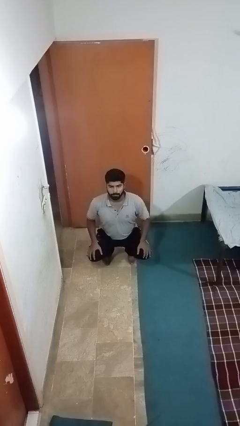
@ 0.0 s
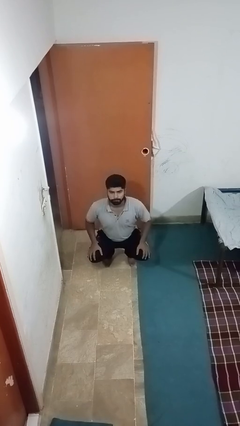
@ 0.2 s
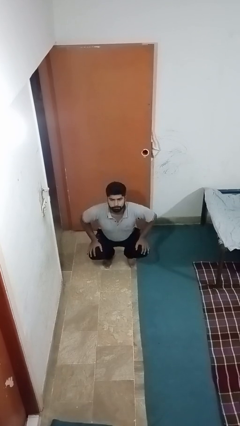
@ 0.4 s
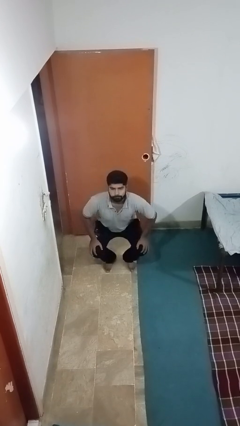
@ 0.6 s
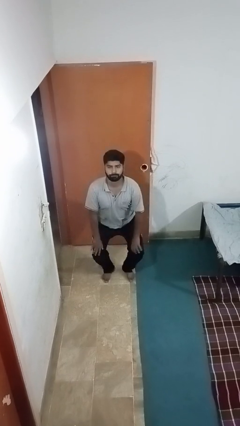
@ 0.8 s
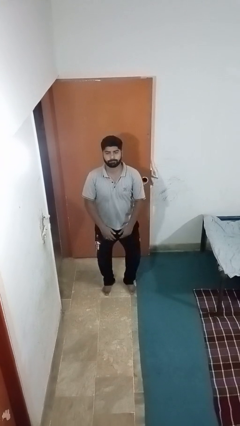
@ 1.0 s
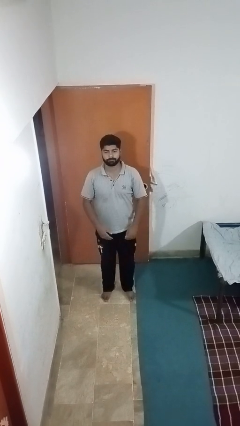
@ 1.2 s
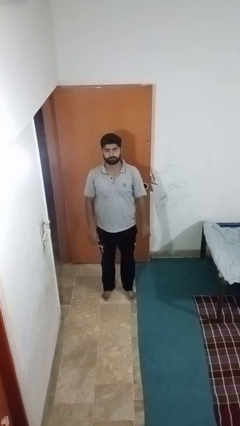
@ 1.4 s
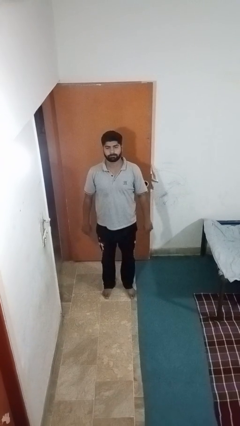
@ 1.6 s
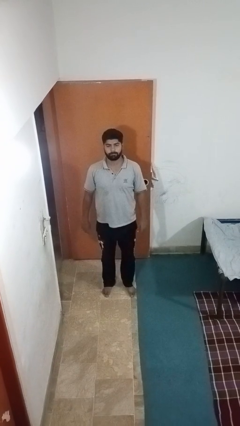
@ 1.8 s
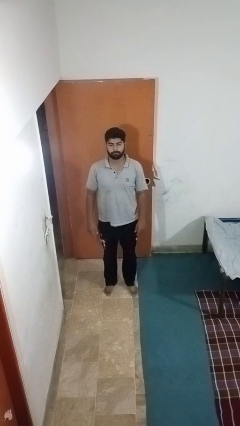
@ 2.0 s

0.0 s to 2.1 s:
person stands up

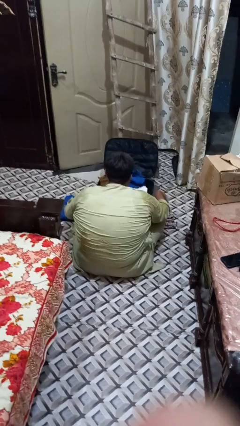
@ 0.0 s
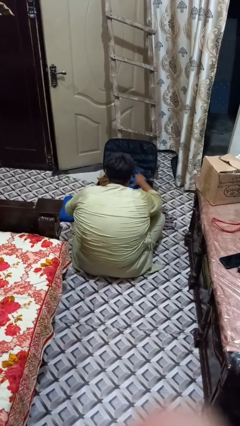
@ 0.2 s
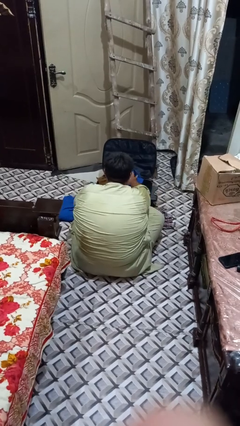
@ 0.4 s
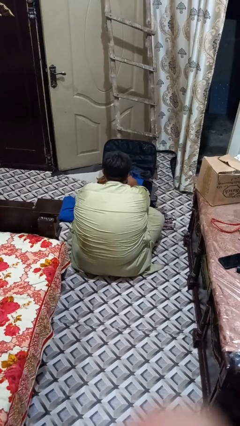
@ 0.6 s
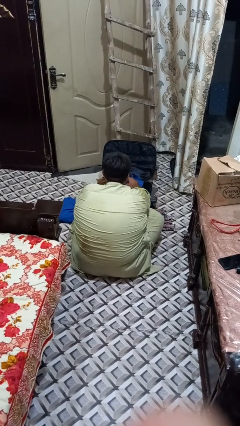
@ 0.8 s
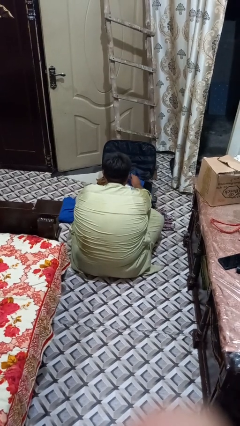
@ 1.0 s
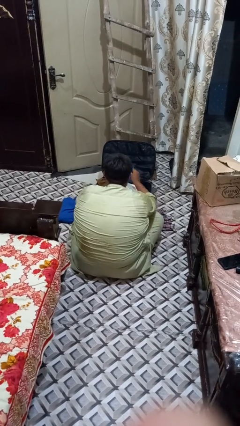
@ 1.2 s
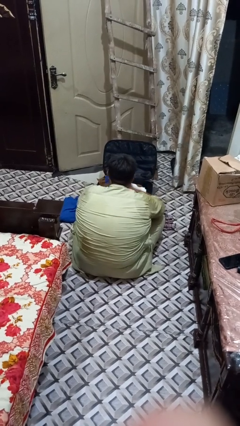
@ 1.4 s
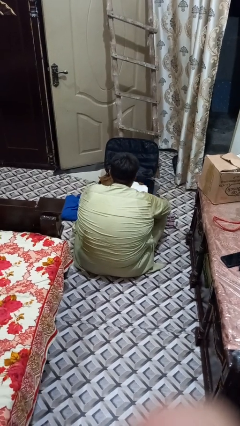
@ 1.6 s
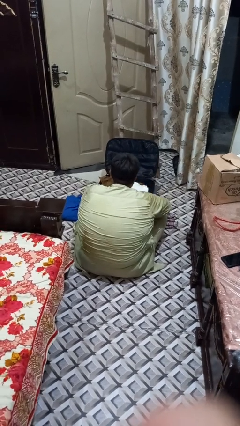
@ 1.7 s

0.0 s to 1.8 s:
person unloads clothes from suitcase

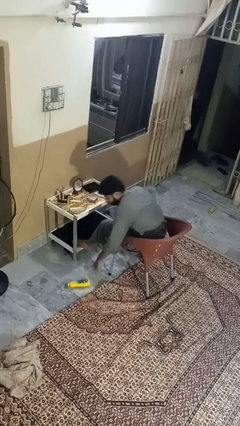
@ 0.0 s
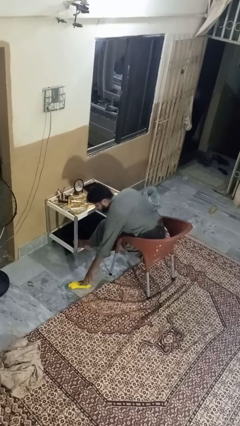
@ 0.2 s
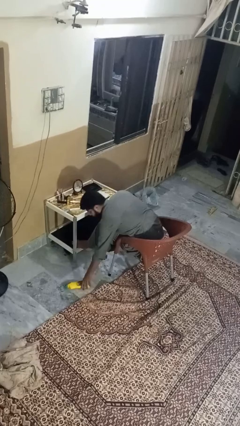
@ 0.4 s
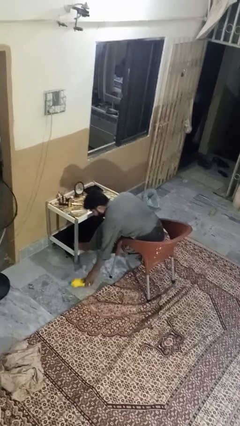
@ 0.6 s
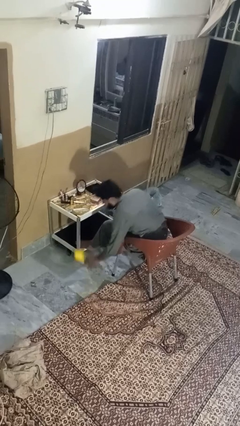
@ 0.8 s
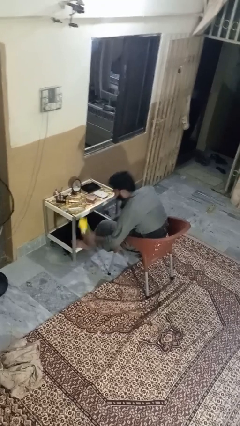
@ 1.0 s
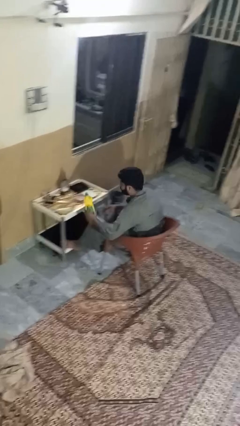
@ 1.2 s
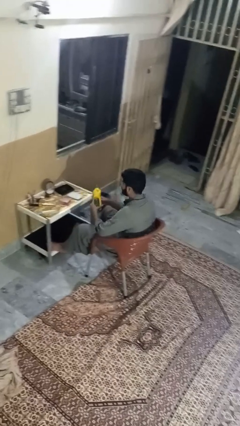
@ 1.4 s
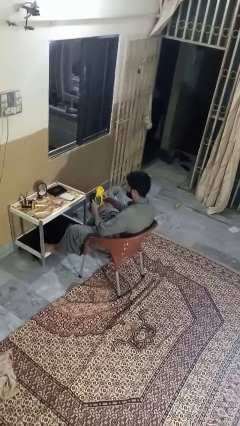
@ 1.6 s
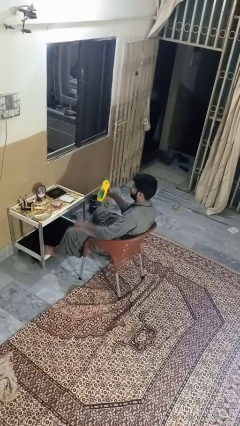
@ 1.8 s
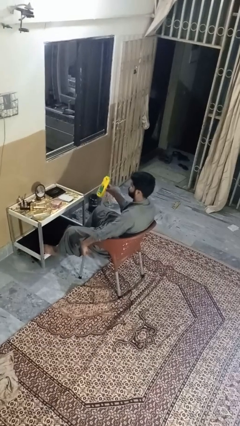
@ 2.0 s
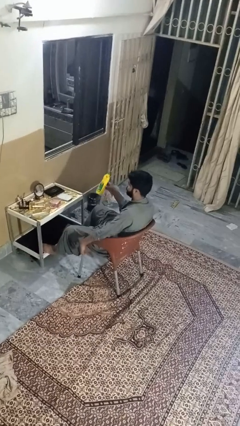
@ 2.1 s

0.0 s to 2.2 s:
person picks up object from floor

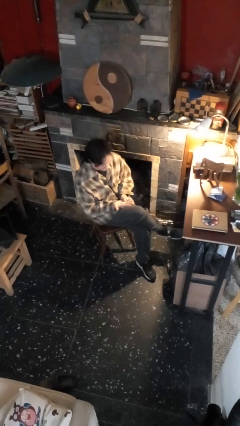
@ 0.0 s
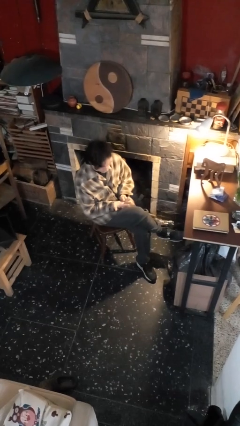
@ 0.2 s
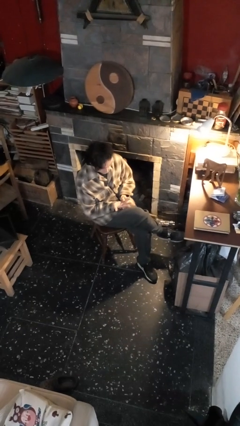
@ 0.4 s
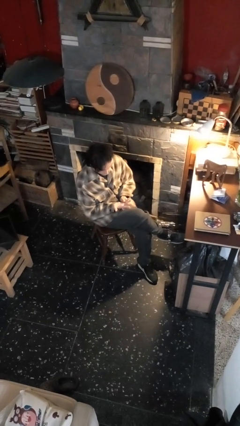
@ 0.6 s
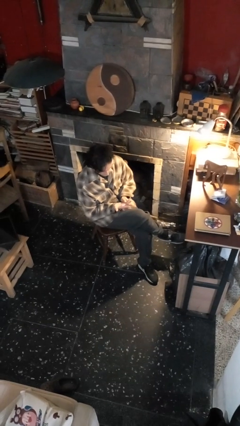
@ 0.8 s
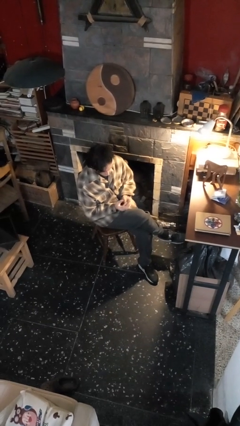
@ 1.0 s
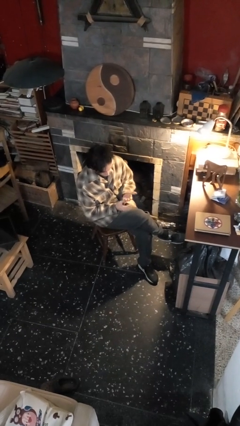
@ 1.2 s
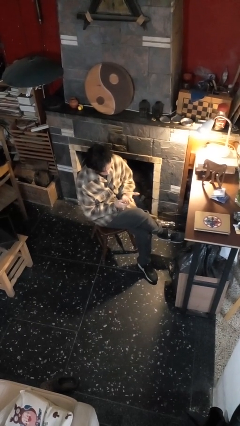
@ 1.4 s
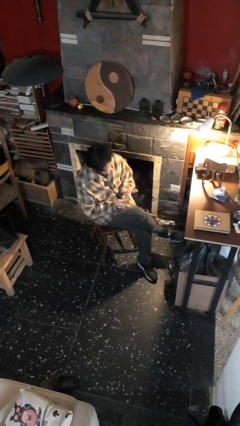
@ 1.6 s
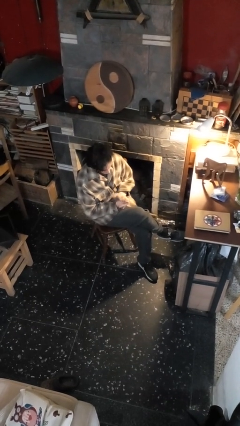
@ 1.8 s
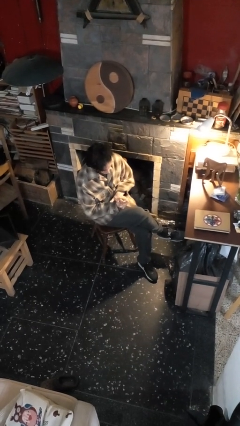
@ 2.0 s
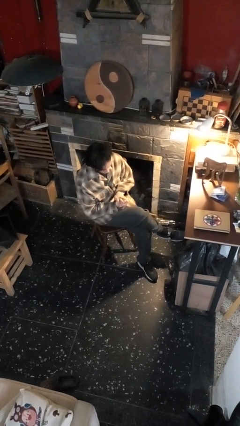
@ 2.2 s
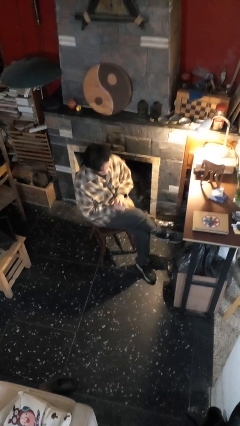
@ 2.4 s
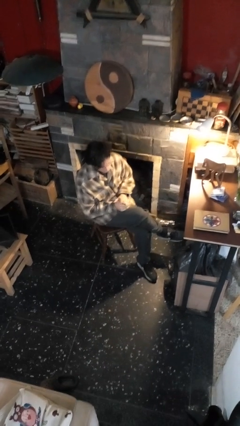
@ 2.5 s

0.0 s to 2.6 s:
person looks at hands in lap

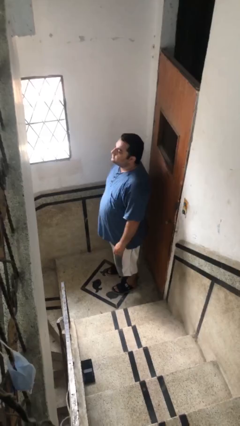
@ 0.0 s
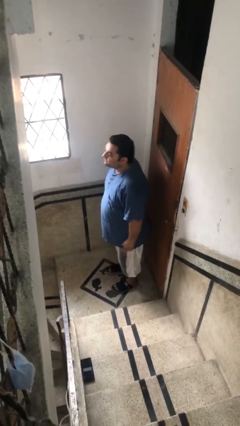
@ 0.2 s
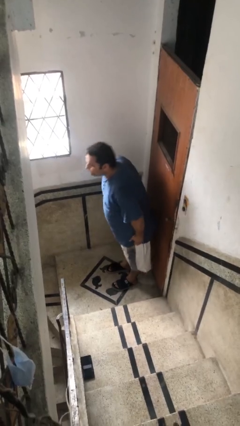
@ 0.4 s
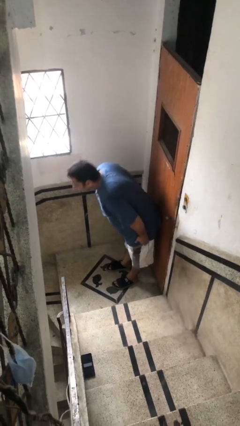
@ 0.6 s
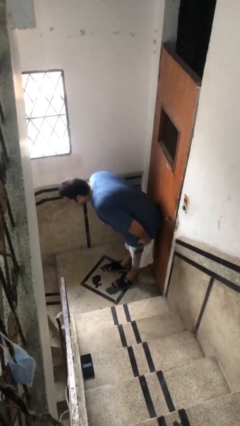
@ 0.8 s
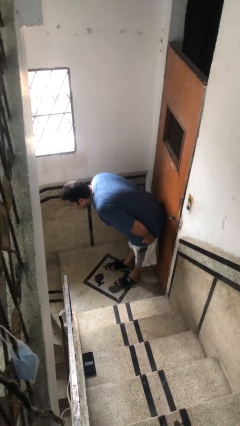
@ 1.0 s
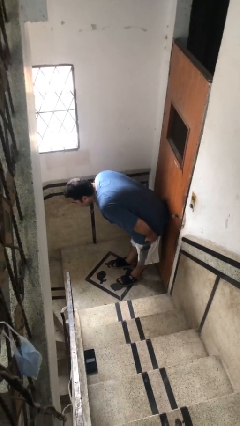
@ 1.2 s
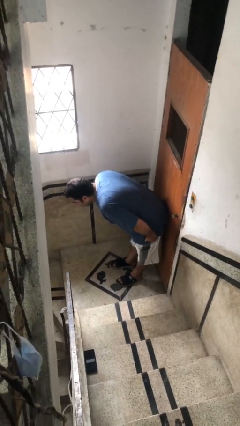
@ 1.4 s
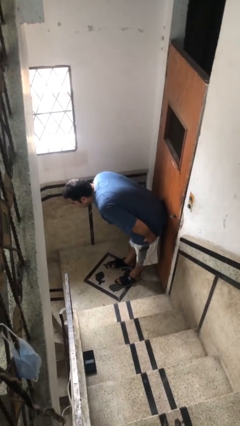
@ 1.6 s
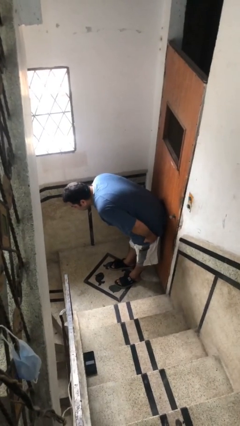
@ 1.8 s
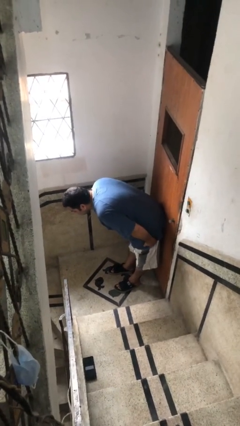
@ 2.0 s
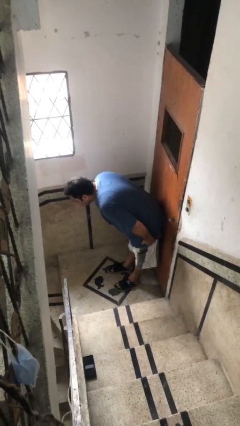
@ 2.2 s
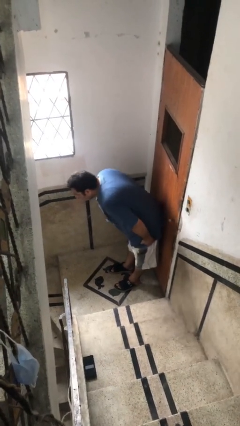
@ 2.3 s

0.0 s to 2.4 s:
person bows

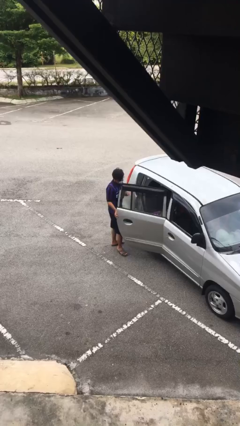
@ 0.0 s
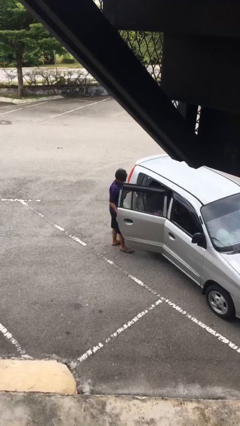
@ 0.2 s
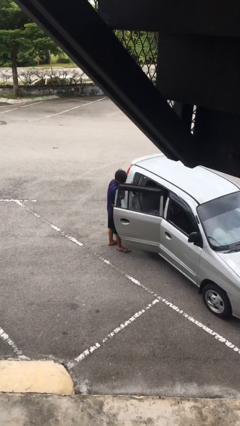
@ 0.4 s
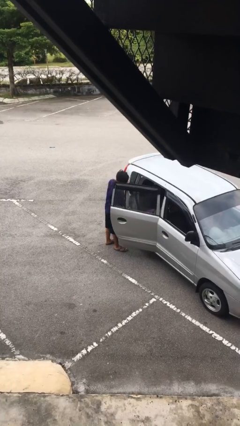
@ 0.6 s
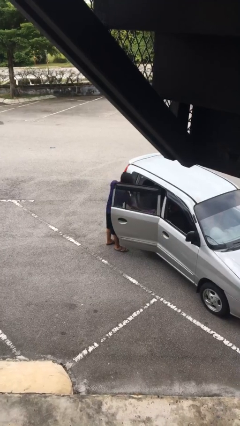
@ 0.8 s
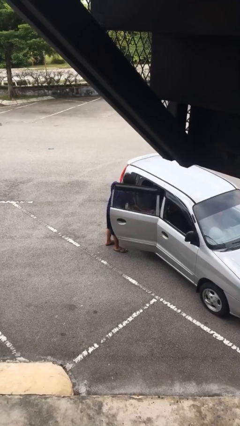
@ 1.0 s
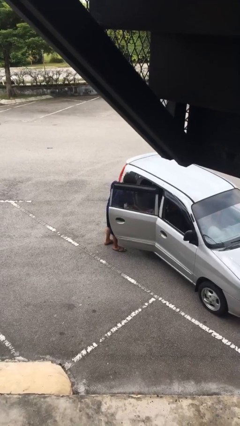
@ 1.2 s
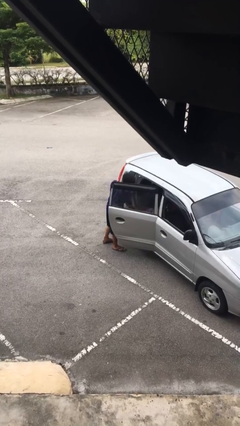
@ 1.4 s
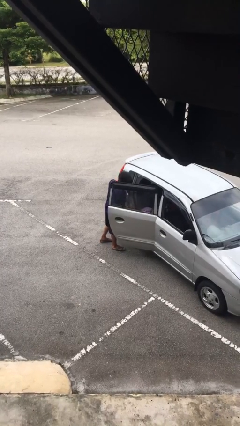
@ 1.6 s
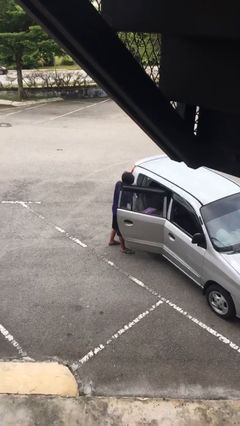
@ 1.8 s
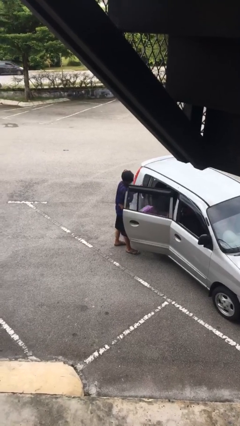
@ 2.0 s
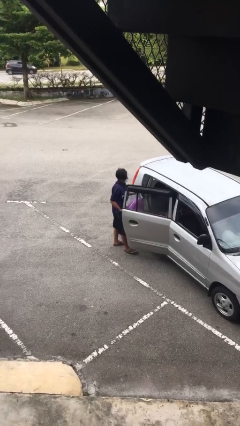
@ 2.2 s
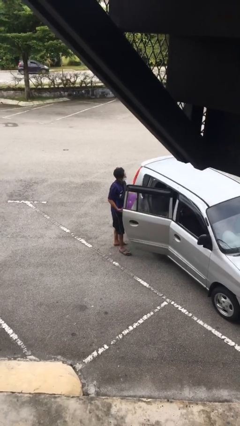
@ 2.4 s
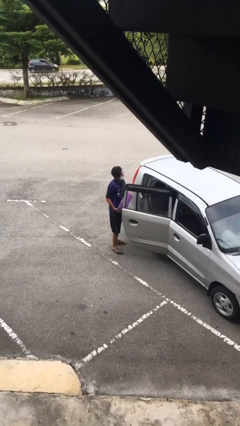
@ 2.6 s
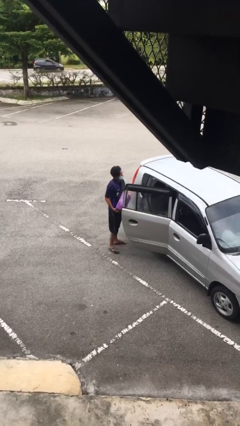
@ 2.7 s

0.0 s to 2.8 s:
person unloads car

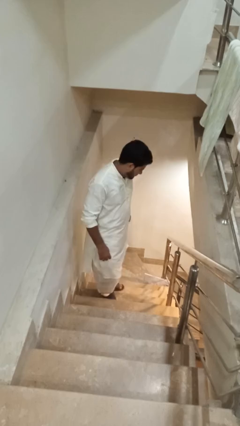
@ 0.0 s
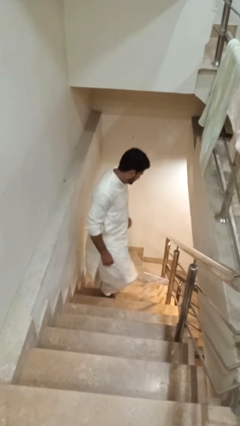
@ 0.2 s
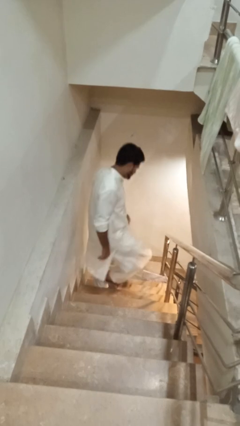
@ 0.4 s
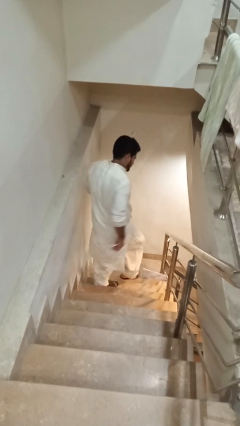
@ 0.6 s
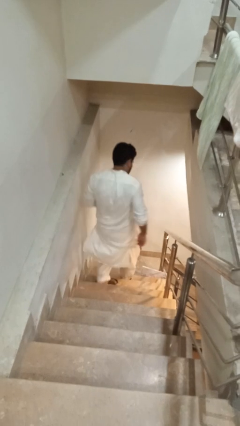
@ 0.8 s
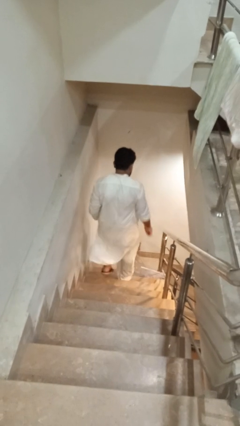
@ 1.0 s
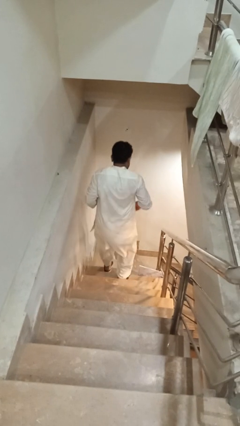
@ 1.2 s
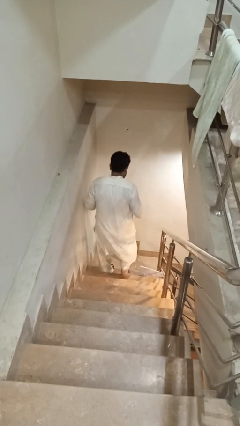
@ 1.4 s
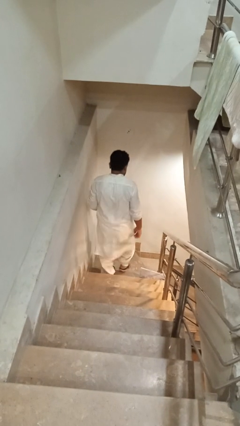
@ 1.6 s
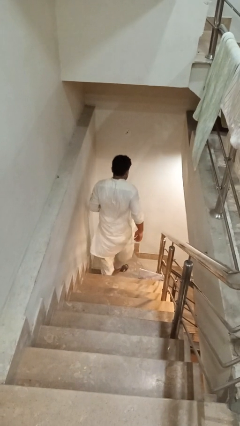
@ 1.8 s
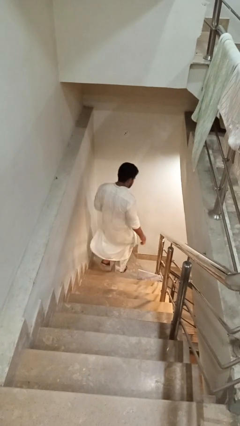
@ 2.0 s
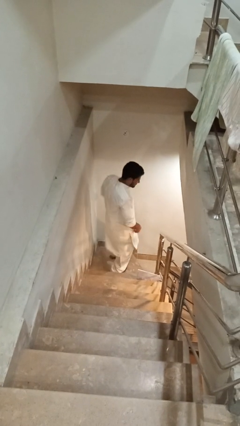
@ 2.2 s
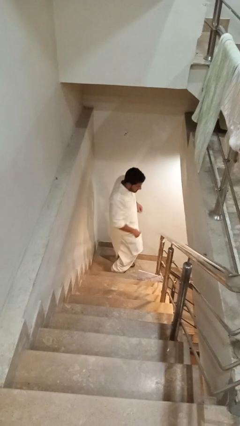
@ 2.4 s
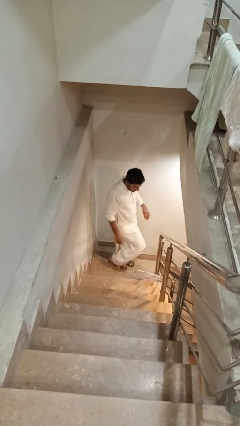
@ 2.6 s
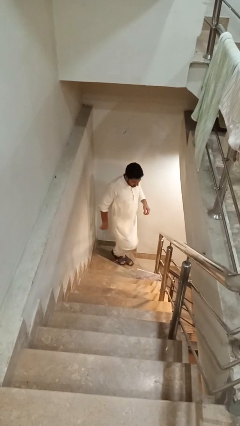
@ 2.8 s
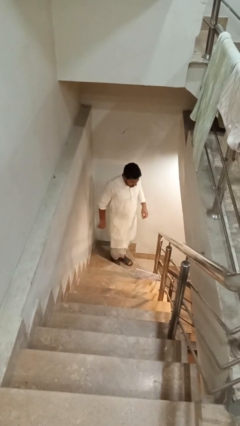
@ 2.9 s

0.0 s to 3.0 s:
person climbs down stairs
